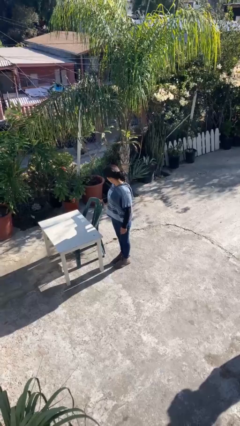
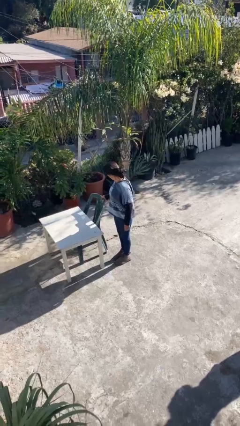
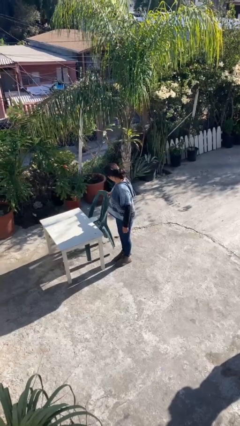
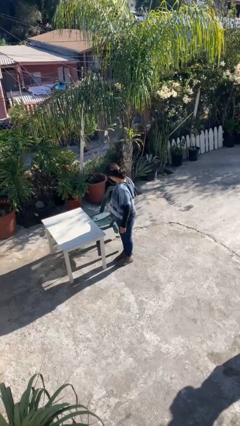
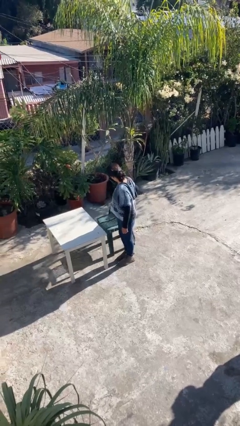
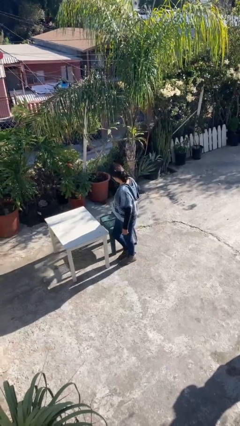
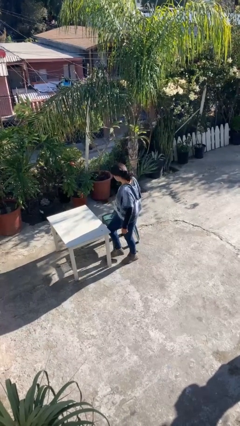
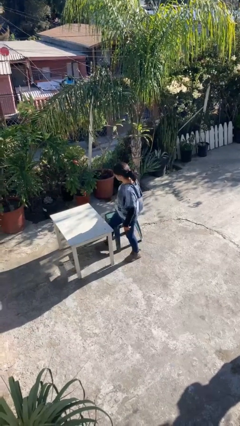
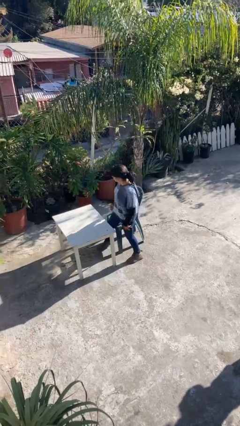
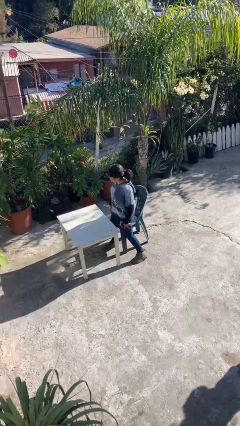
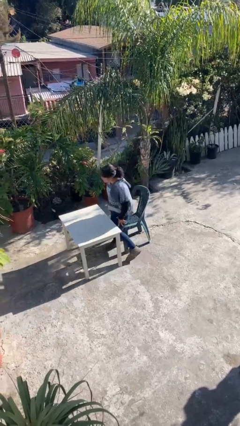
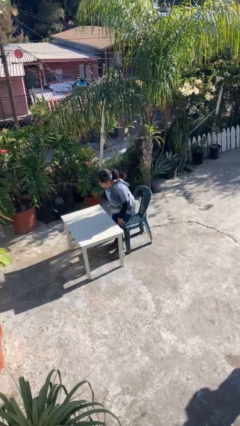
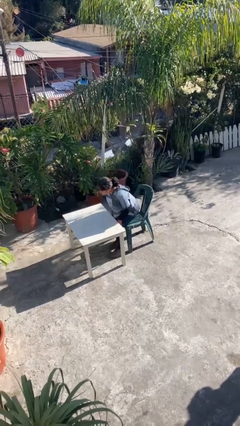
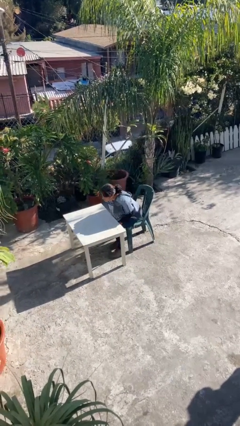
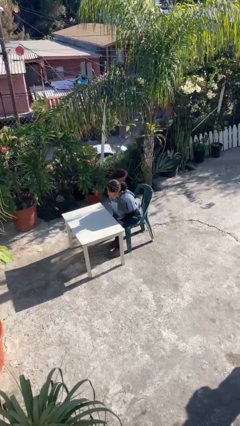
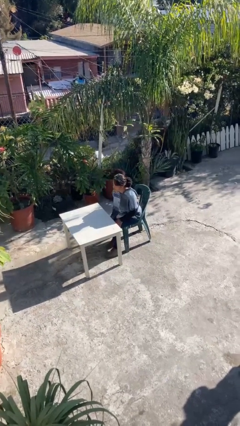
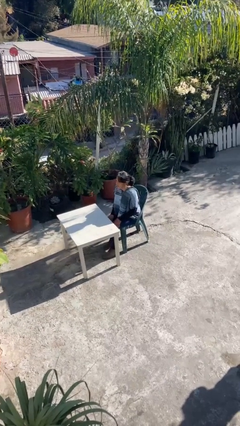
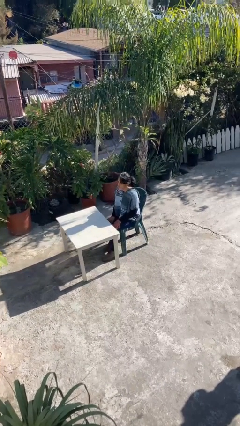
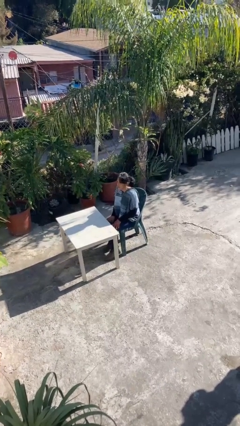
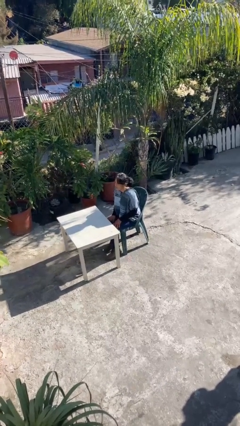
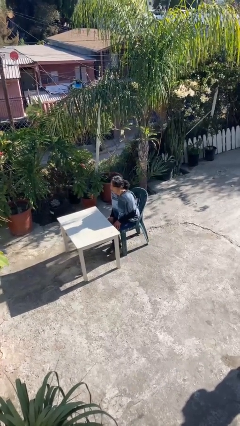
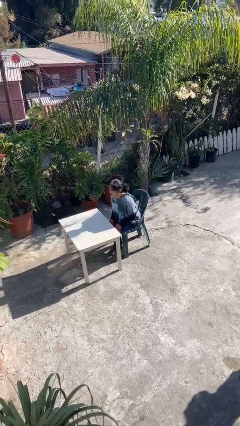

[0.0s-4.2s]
person sits down

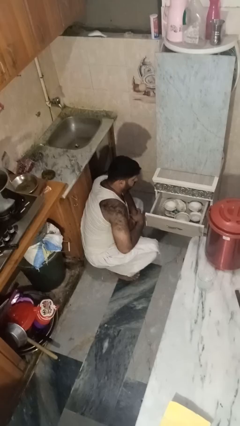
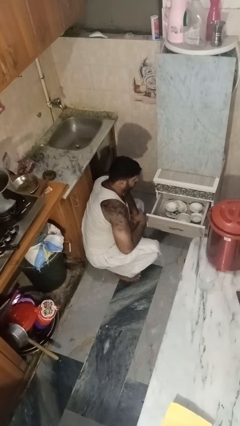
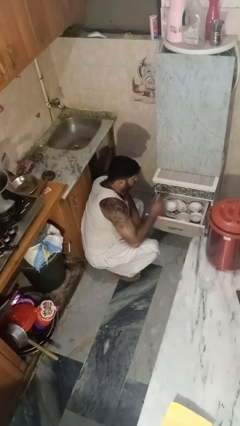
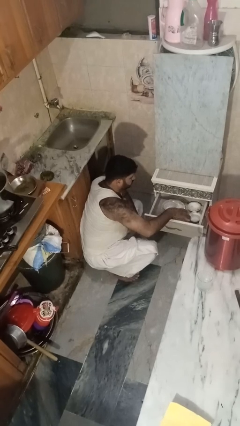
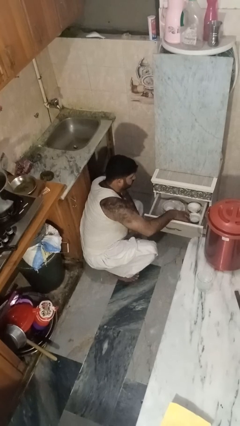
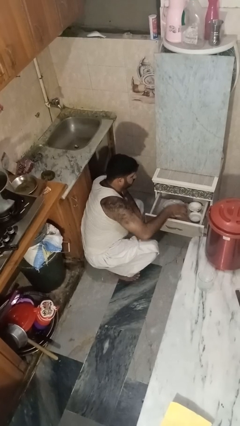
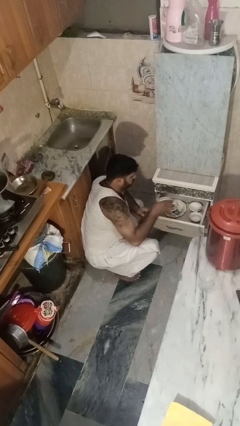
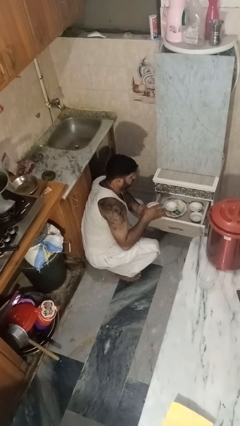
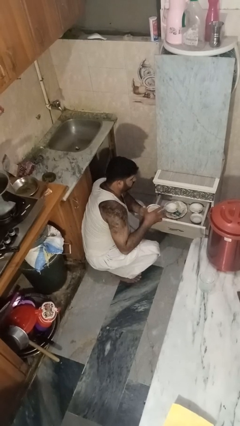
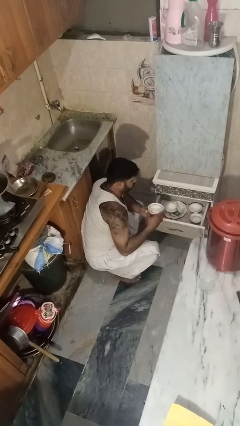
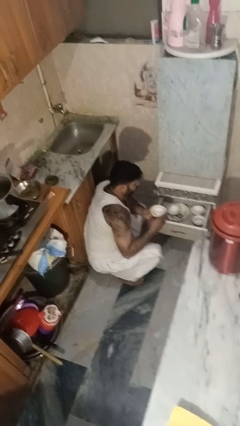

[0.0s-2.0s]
person takes object from kitchen drawer

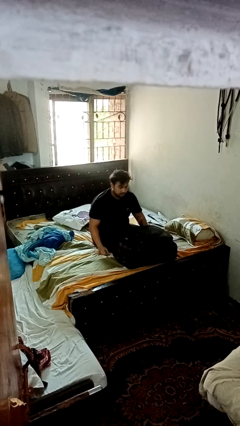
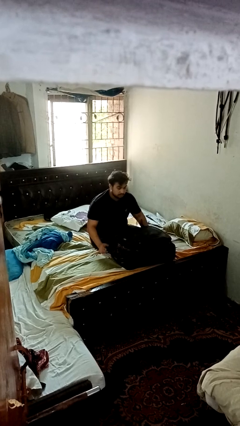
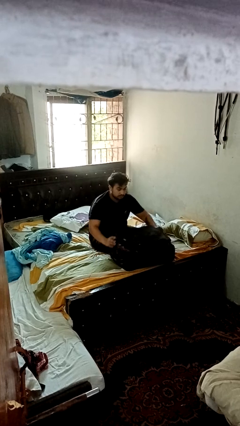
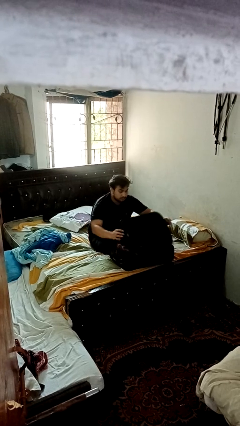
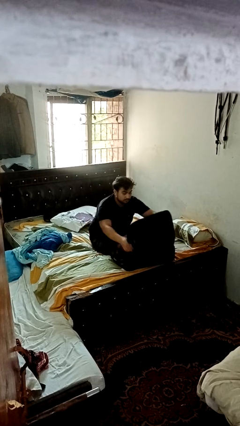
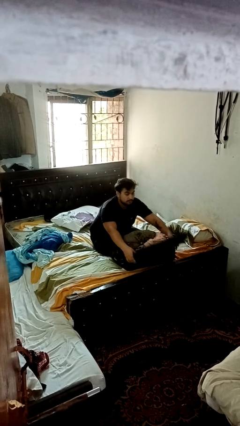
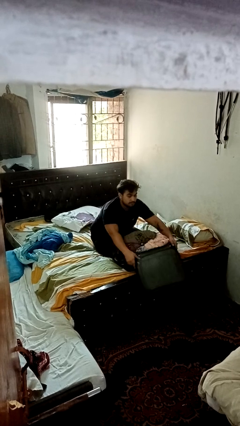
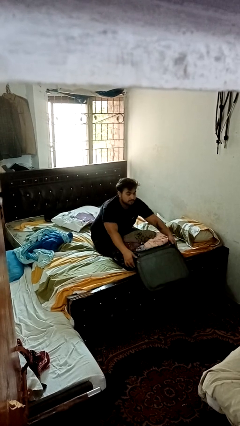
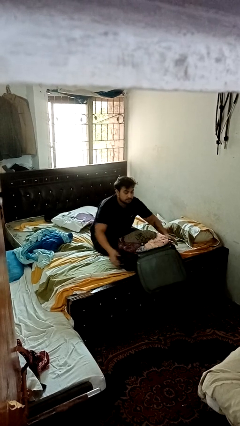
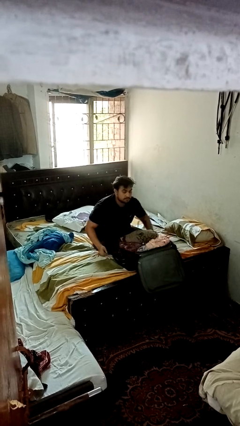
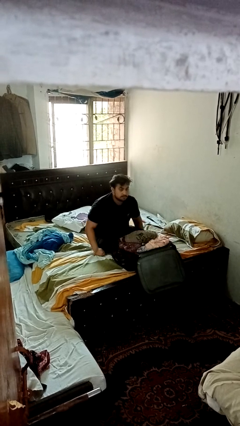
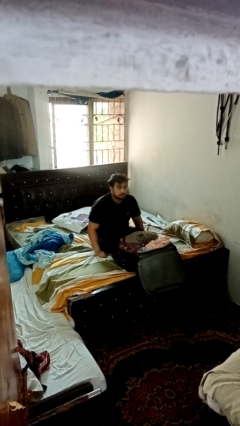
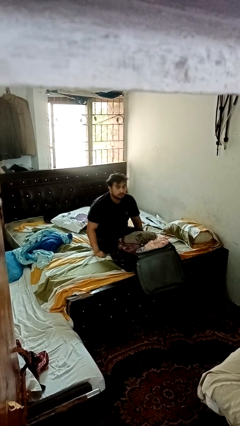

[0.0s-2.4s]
person opens suitcase

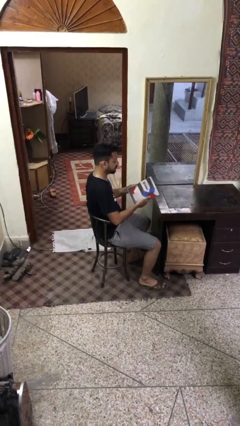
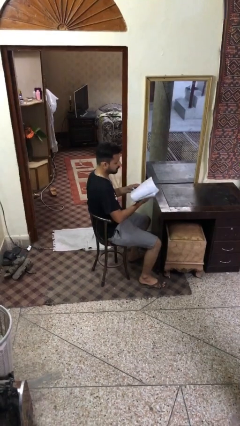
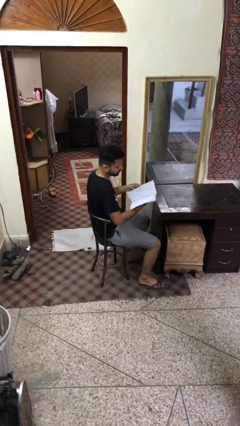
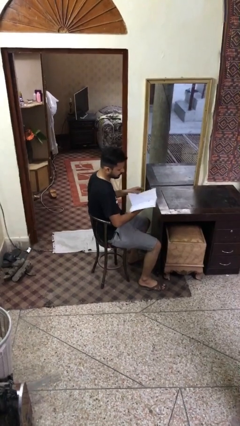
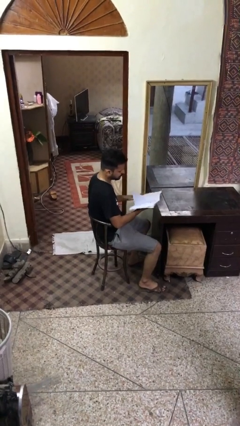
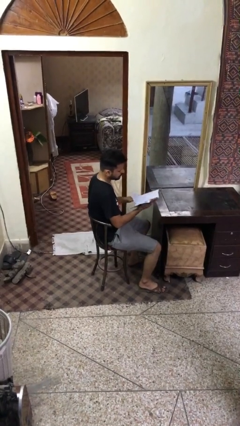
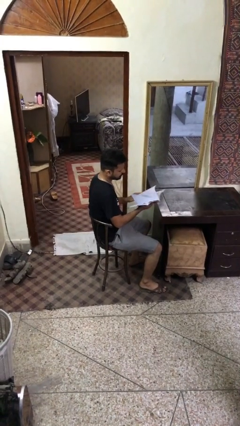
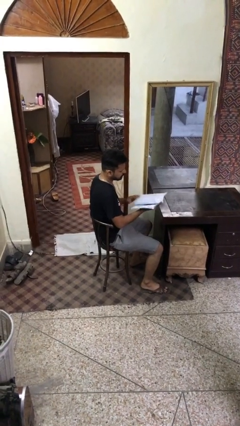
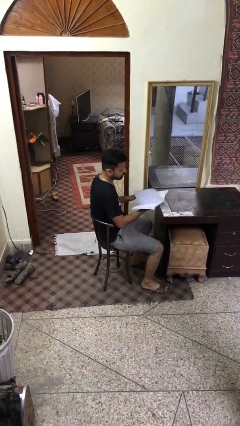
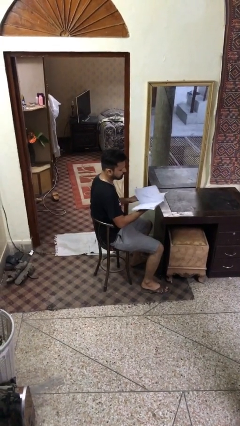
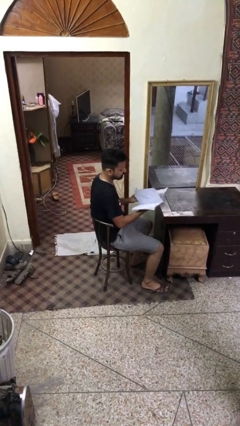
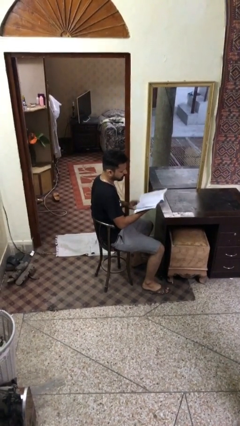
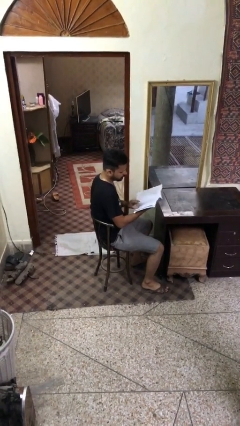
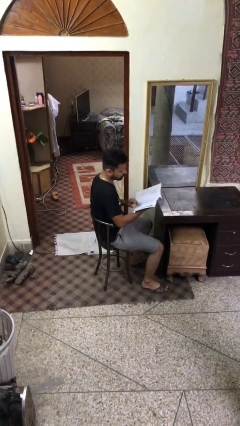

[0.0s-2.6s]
person reads document

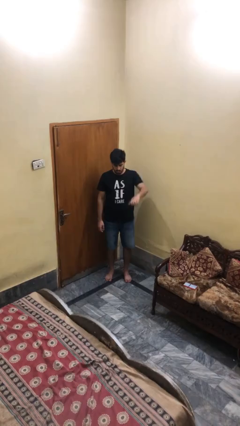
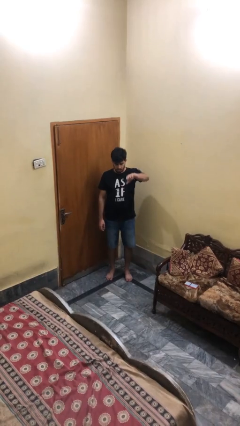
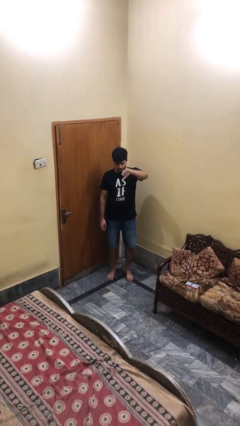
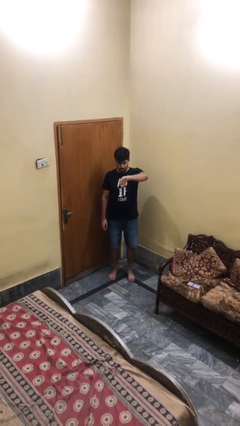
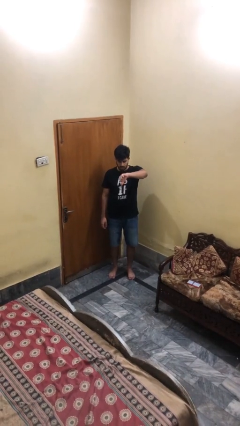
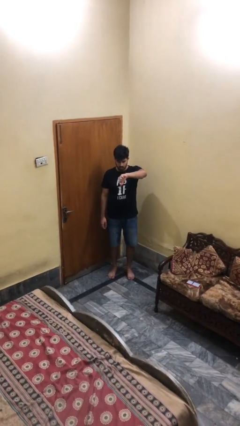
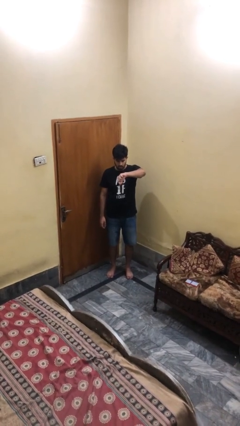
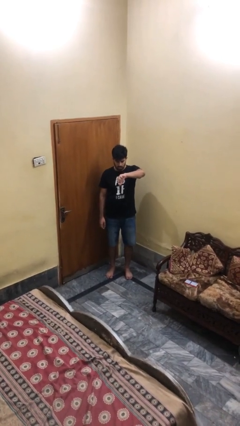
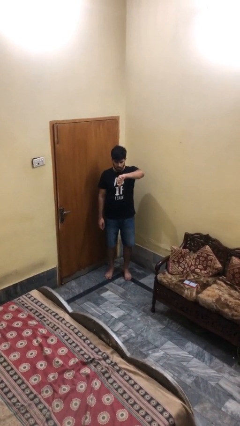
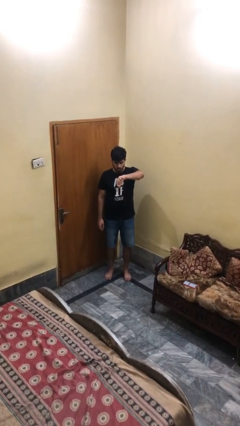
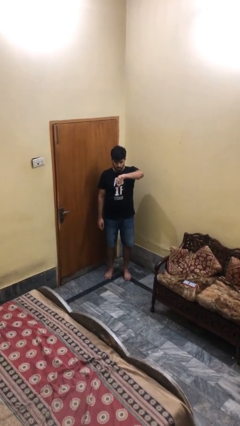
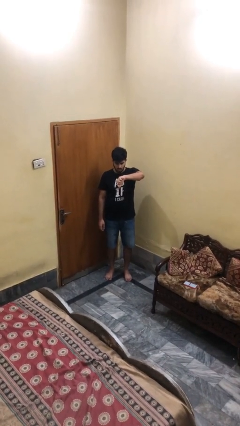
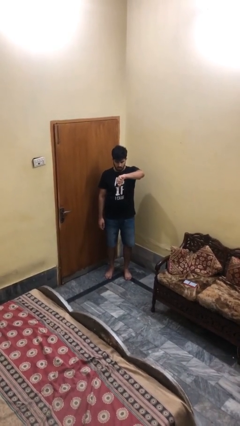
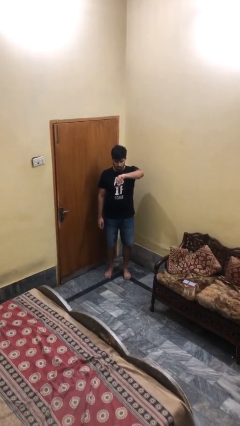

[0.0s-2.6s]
person gestures thumbs down

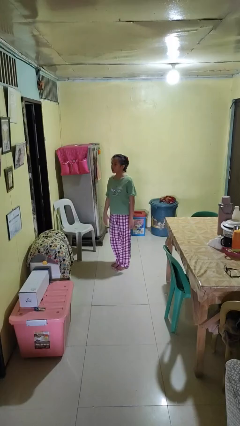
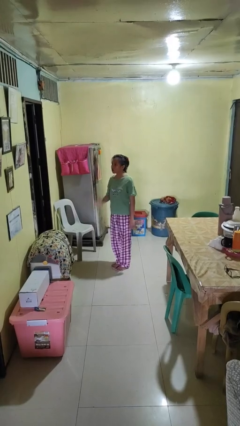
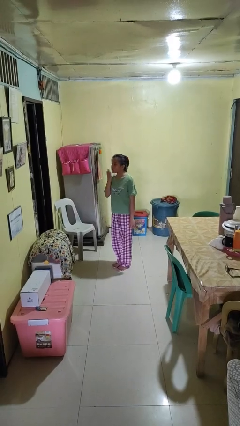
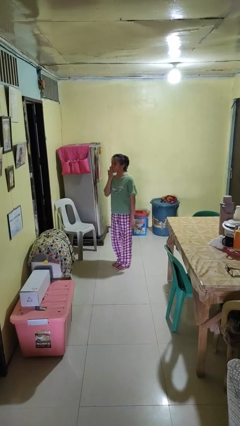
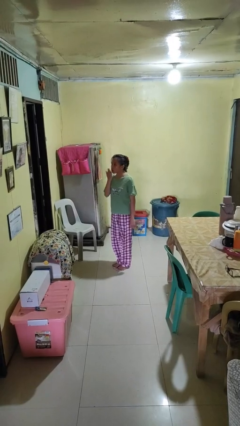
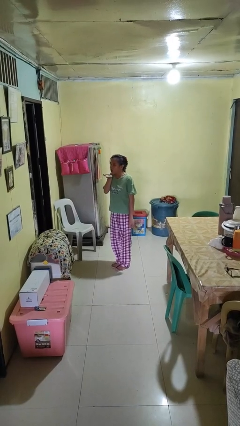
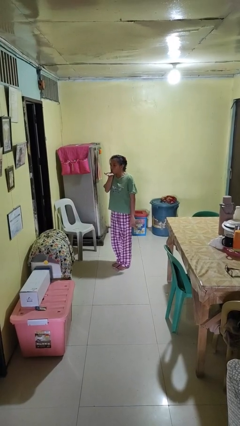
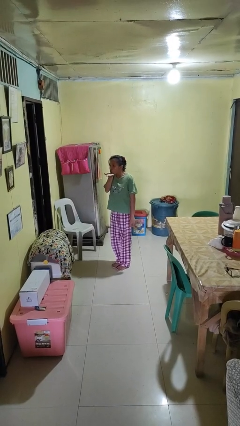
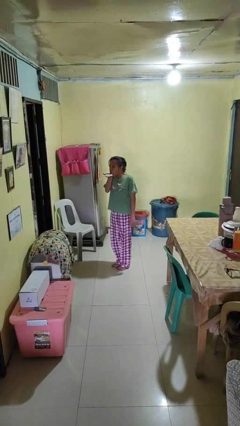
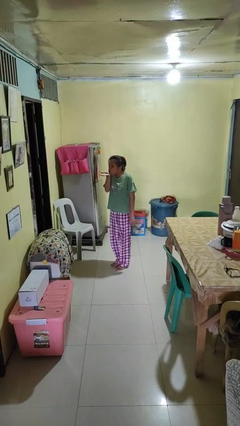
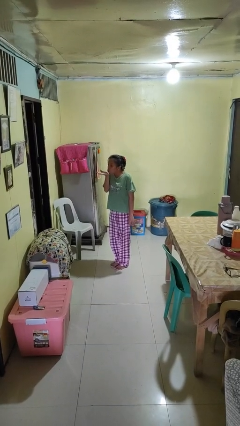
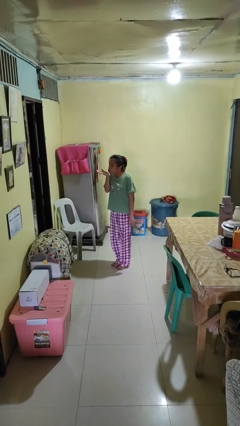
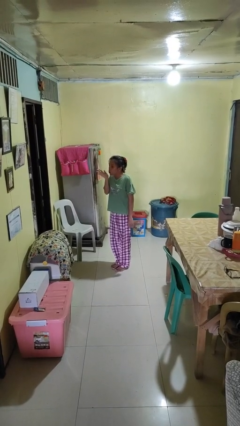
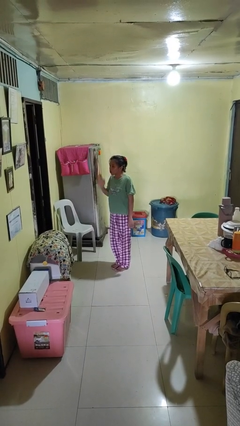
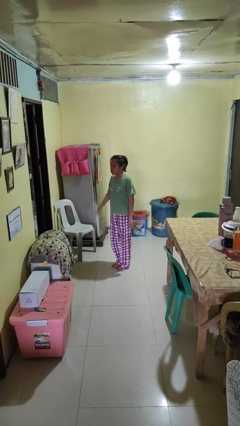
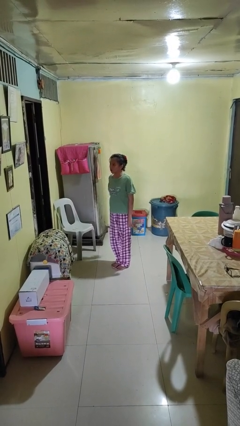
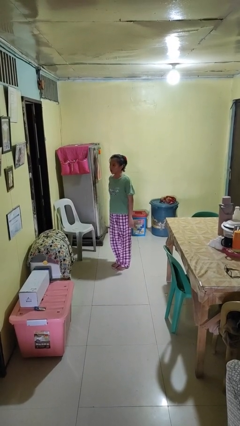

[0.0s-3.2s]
person gestures blow kiss

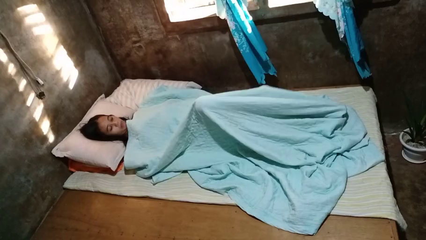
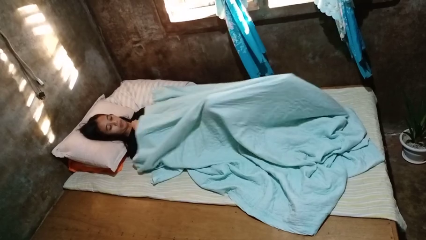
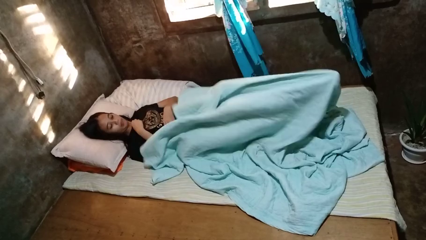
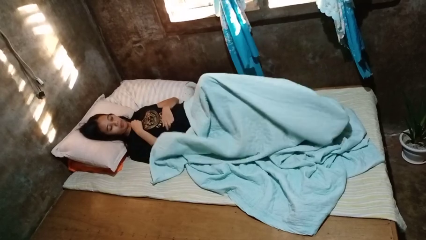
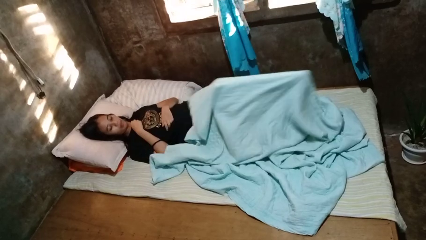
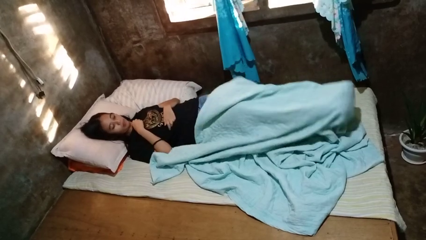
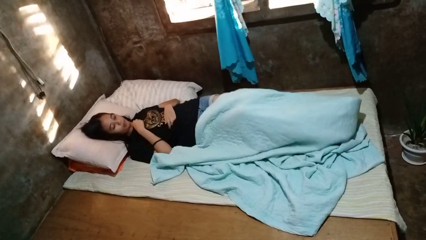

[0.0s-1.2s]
person uncovers with bedsheets
